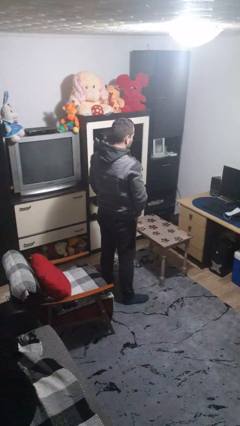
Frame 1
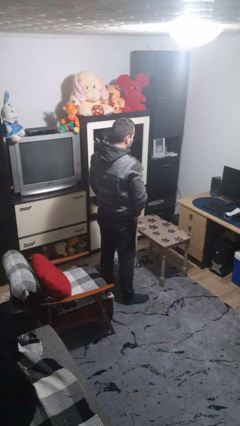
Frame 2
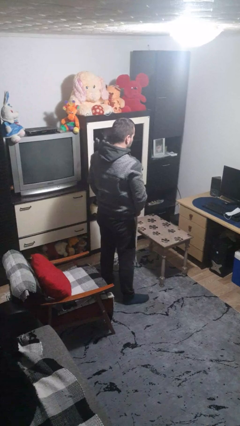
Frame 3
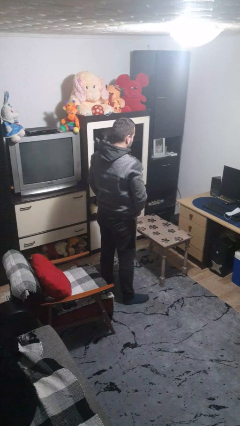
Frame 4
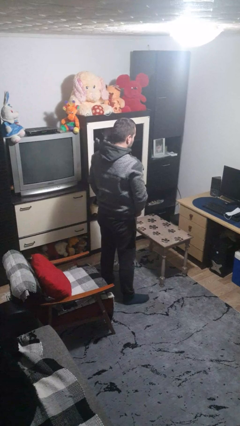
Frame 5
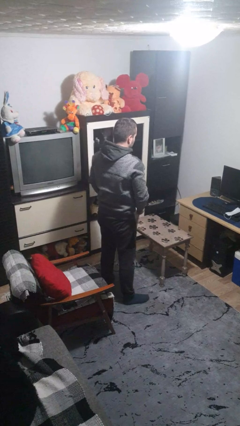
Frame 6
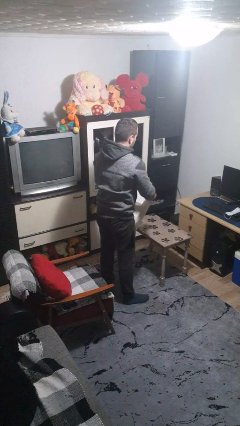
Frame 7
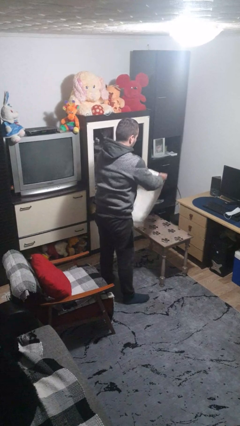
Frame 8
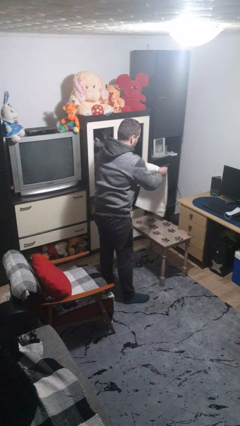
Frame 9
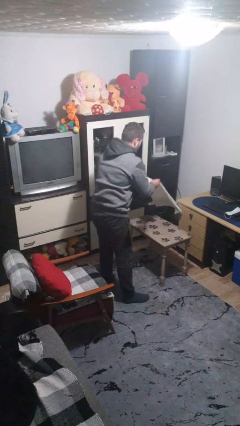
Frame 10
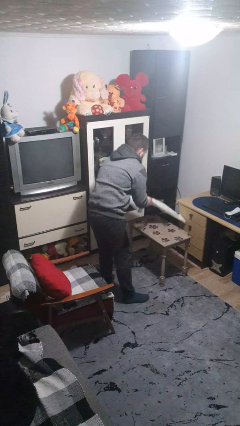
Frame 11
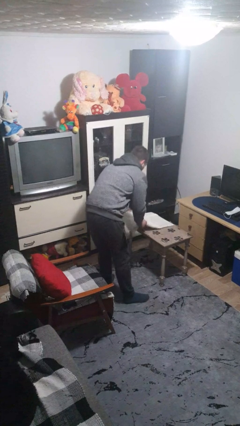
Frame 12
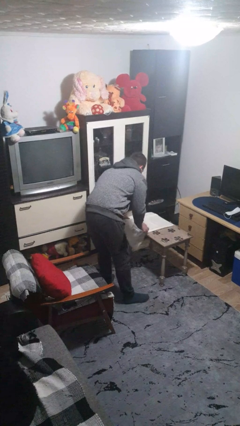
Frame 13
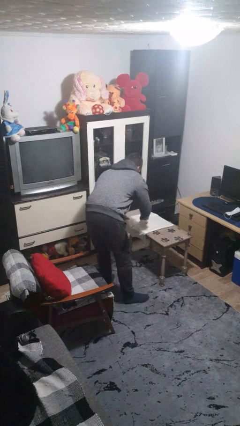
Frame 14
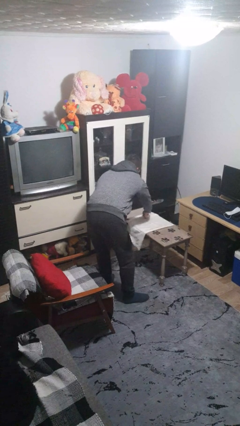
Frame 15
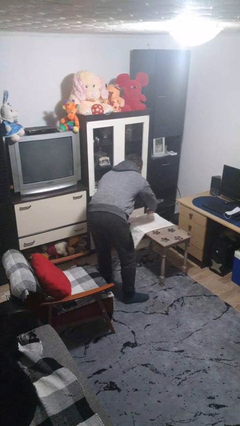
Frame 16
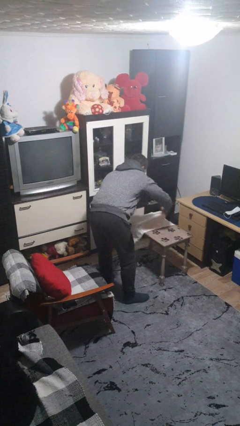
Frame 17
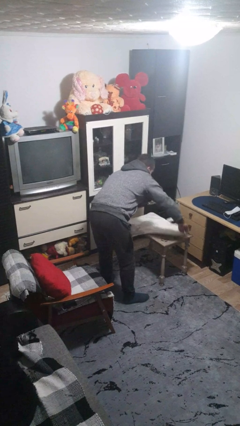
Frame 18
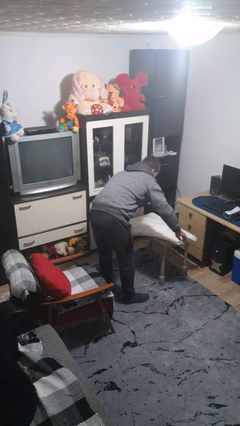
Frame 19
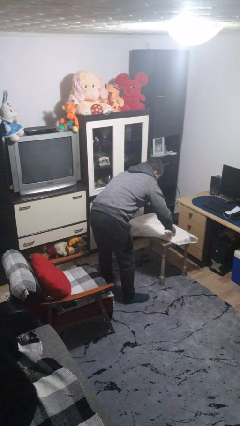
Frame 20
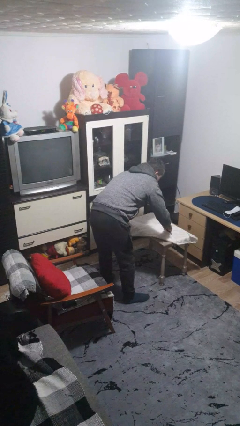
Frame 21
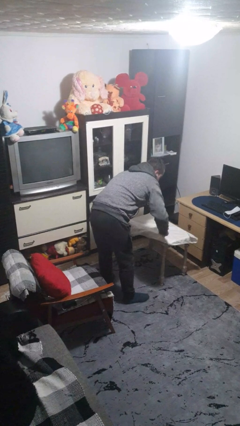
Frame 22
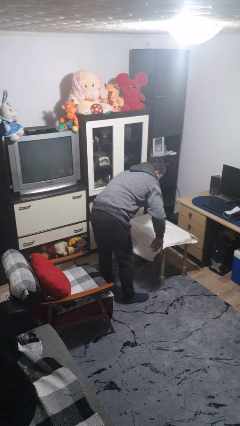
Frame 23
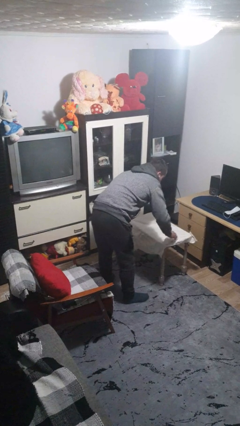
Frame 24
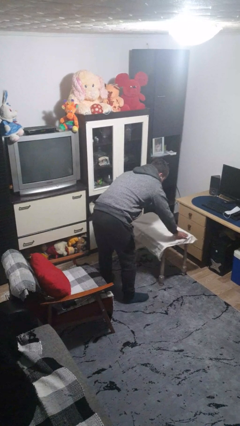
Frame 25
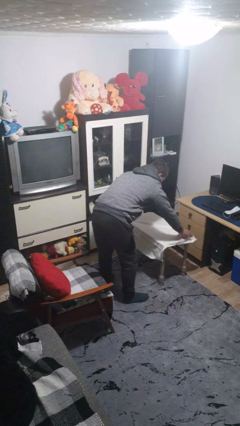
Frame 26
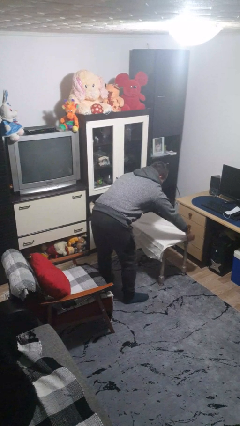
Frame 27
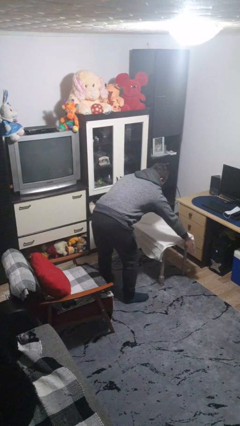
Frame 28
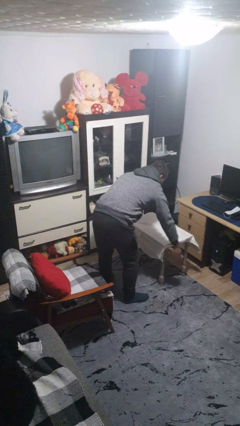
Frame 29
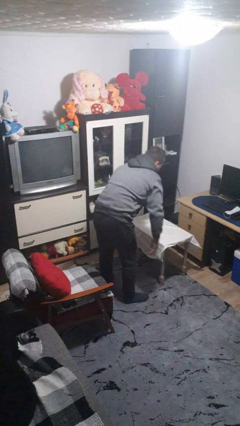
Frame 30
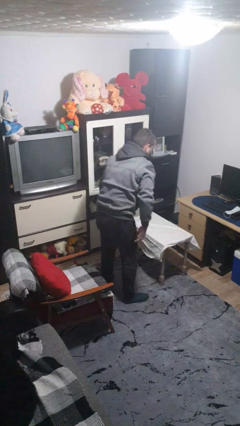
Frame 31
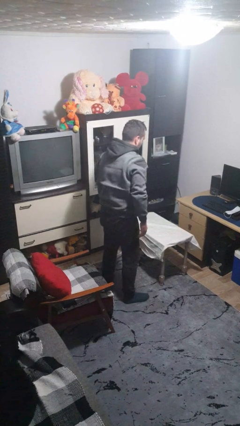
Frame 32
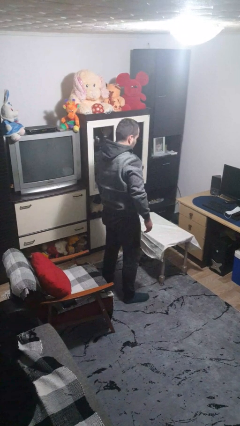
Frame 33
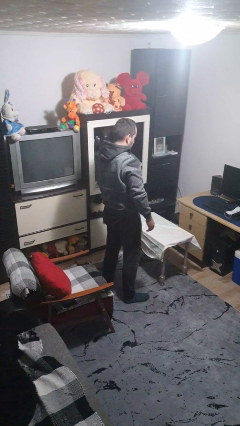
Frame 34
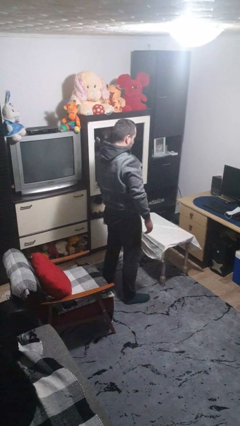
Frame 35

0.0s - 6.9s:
person spreads tablecloth

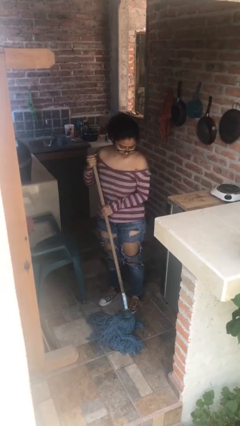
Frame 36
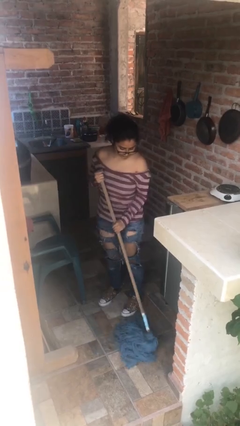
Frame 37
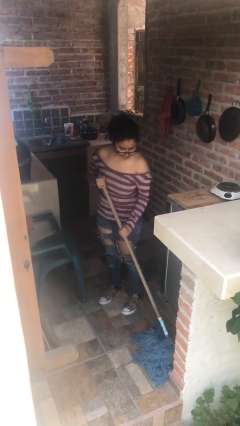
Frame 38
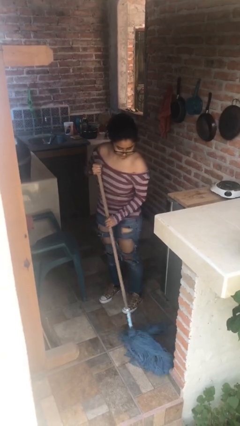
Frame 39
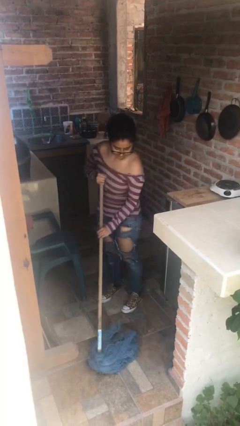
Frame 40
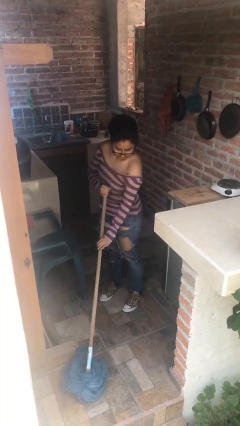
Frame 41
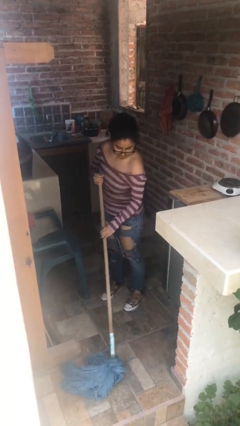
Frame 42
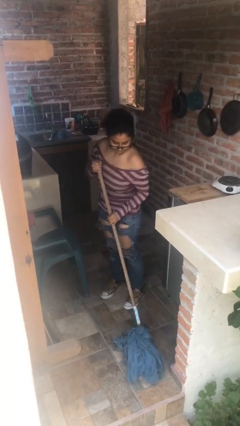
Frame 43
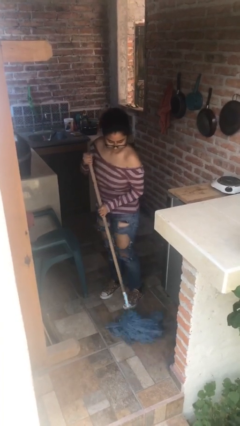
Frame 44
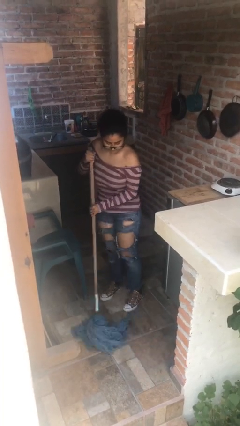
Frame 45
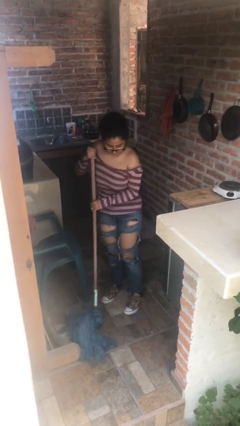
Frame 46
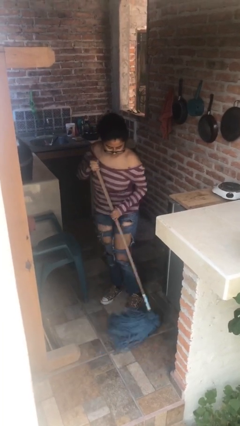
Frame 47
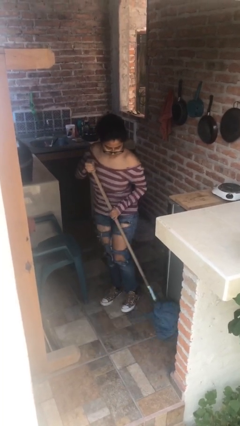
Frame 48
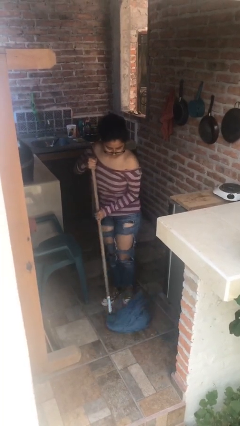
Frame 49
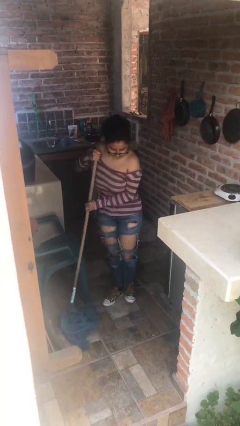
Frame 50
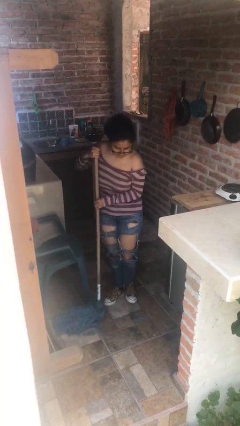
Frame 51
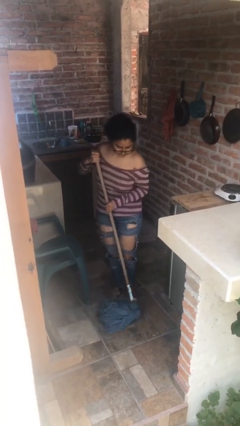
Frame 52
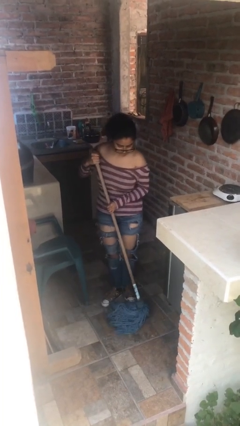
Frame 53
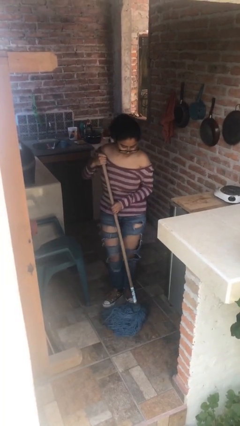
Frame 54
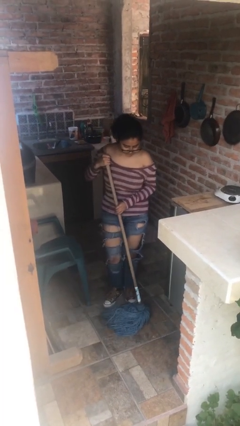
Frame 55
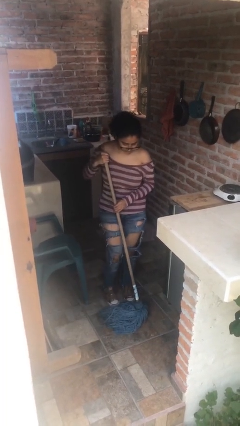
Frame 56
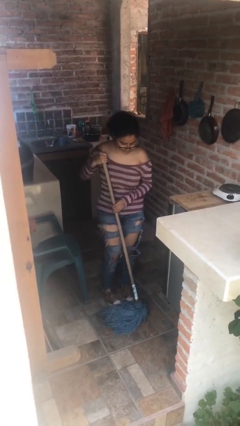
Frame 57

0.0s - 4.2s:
person mops

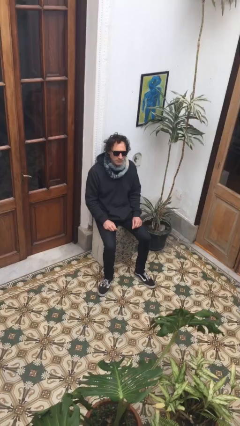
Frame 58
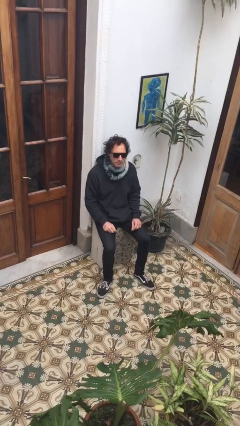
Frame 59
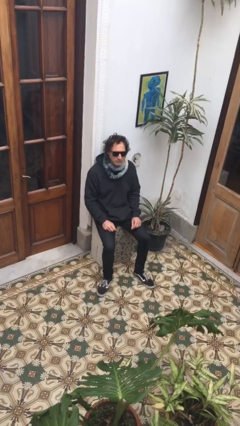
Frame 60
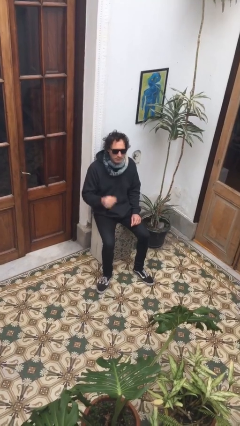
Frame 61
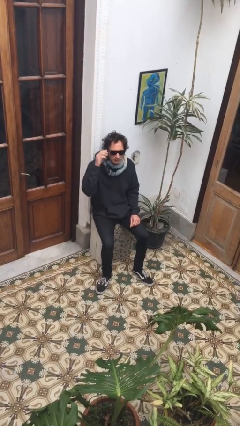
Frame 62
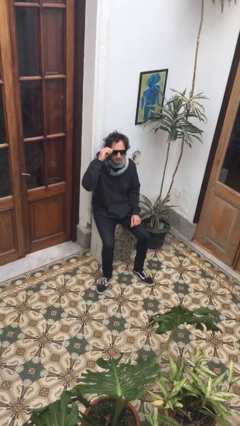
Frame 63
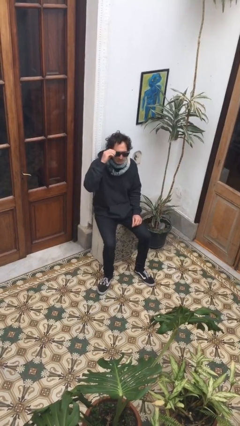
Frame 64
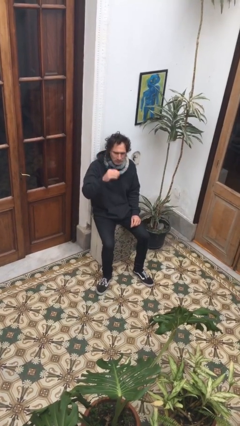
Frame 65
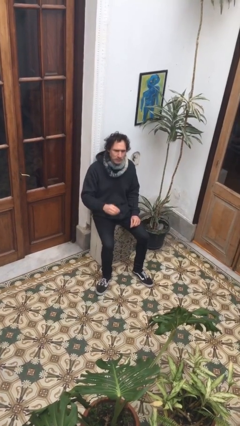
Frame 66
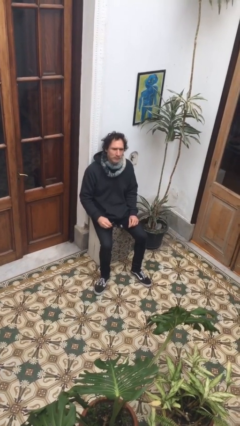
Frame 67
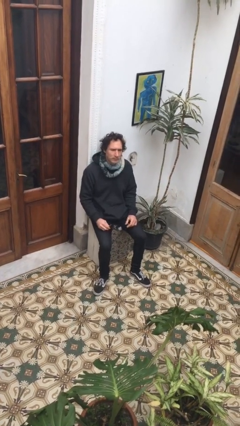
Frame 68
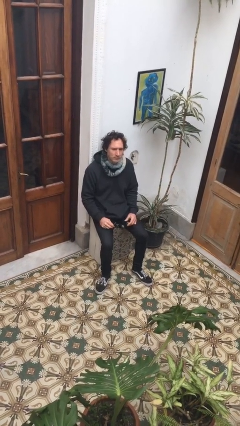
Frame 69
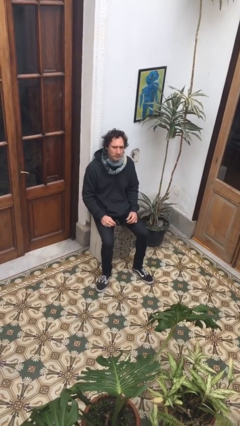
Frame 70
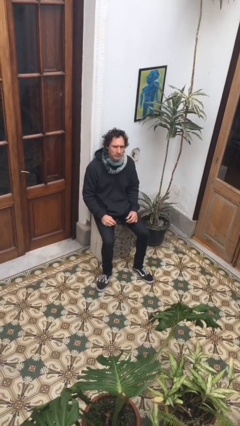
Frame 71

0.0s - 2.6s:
person takes off sunglasses

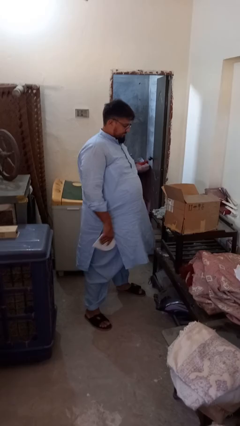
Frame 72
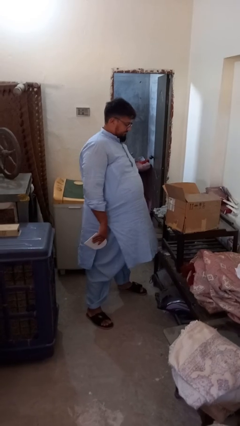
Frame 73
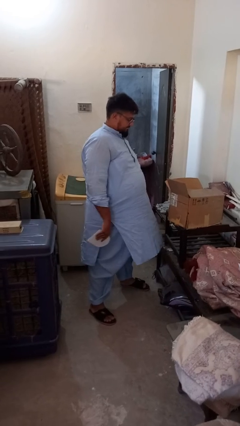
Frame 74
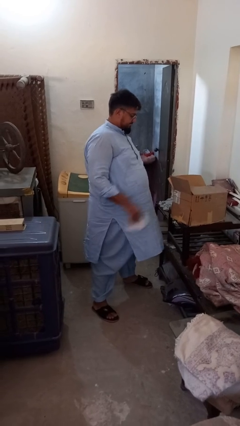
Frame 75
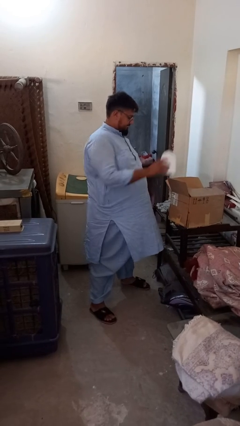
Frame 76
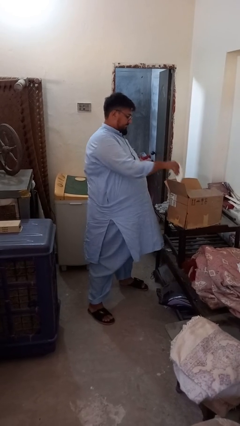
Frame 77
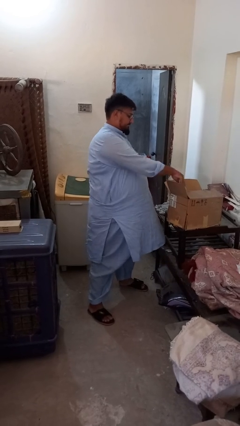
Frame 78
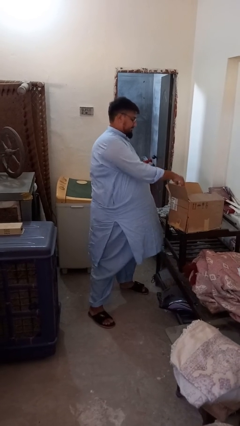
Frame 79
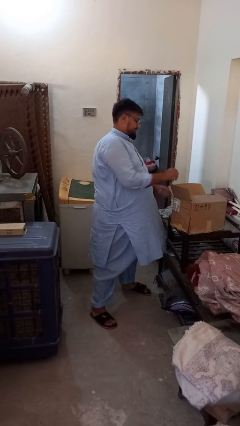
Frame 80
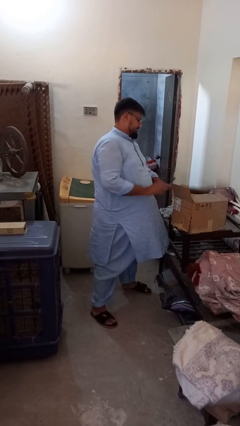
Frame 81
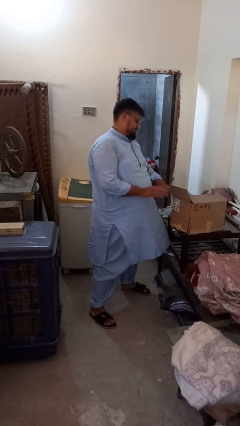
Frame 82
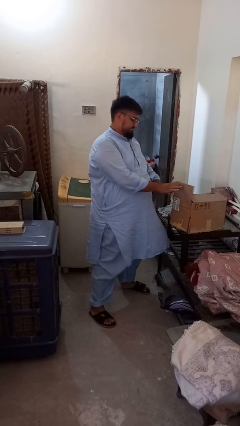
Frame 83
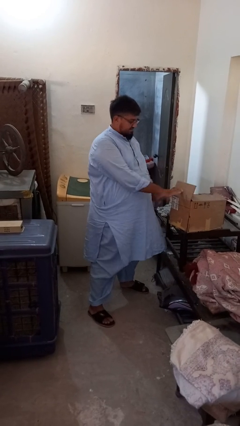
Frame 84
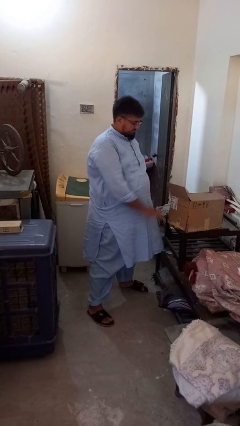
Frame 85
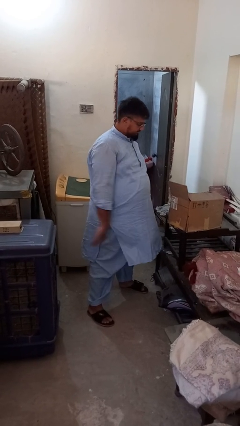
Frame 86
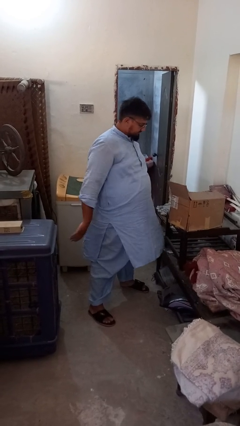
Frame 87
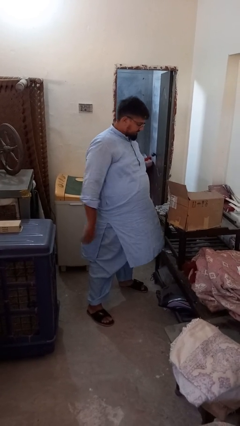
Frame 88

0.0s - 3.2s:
person puts object into box

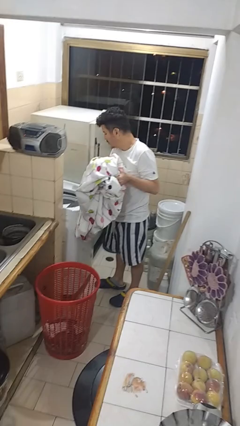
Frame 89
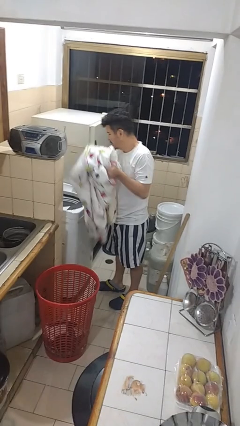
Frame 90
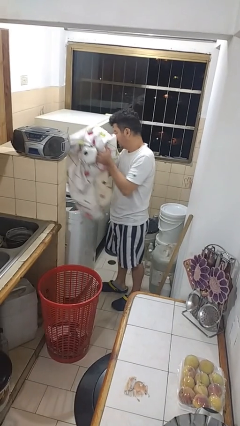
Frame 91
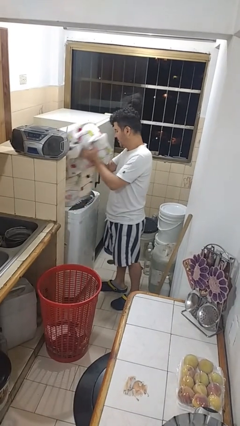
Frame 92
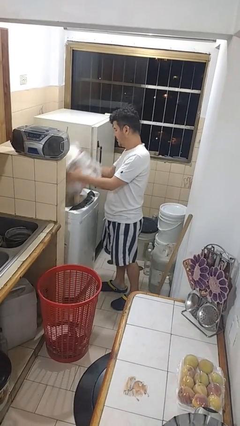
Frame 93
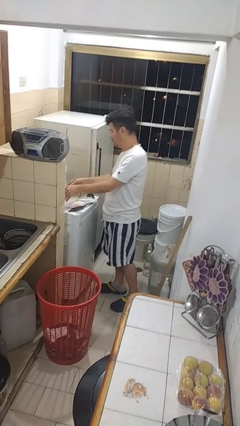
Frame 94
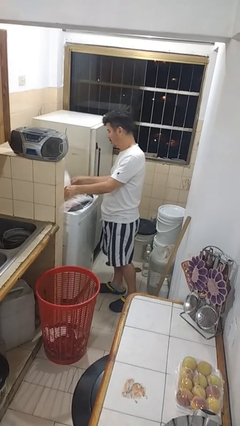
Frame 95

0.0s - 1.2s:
person loads clotheswasher
